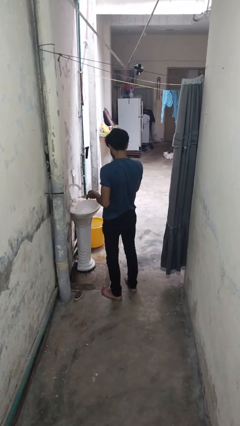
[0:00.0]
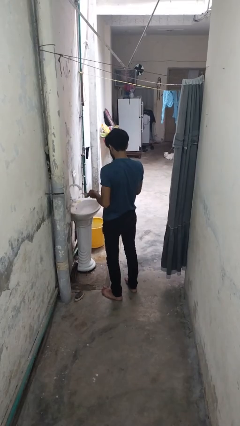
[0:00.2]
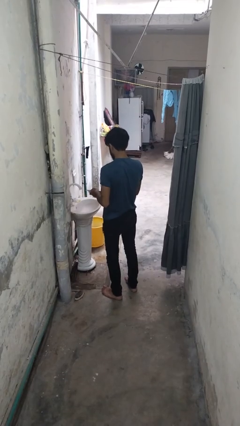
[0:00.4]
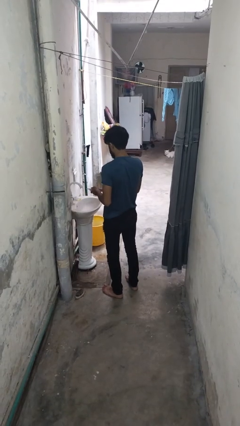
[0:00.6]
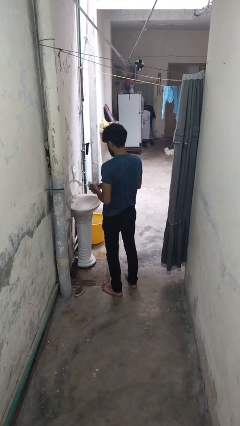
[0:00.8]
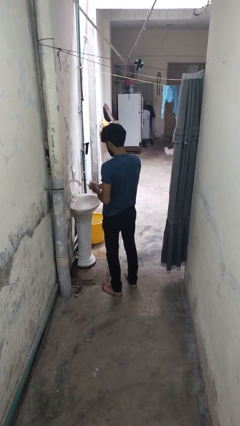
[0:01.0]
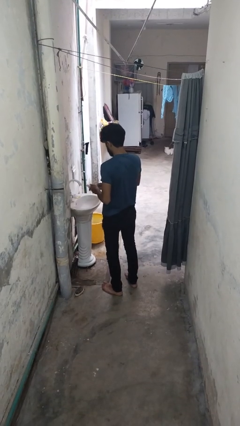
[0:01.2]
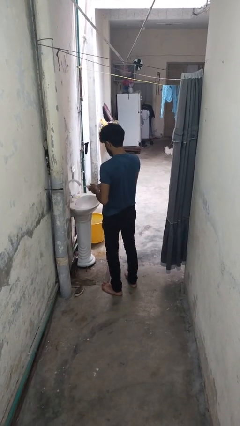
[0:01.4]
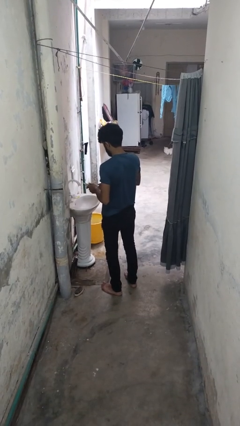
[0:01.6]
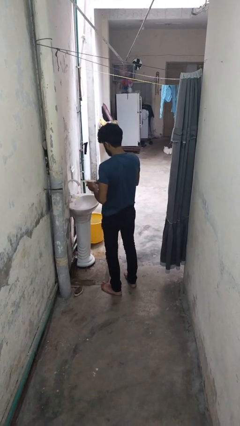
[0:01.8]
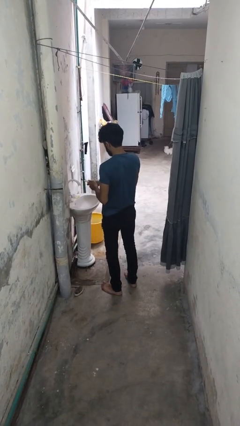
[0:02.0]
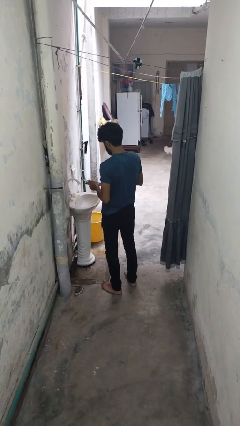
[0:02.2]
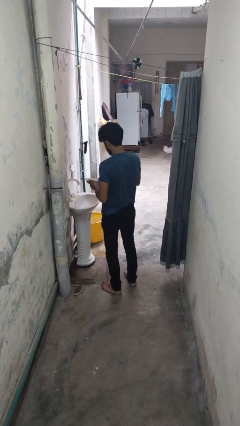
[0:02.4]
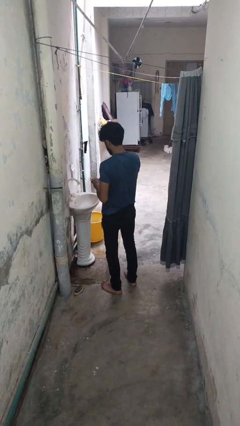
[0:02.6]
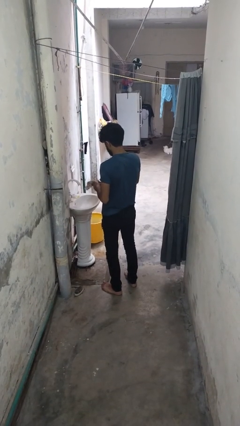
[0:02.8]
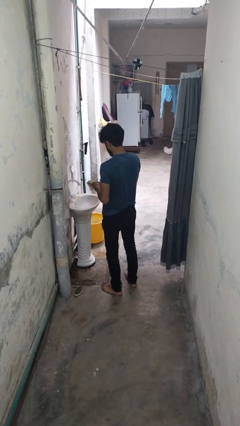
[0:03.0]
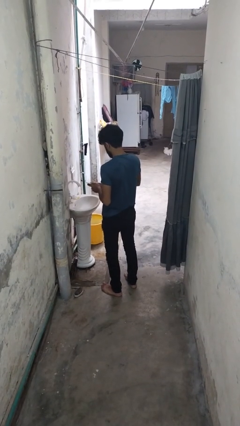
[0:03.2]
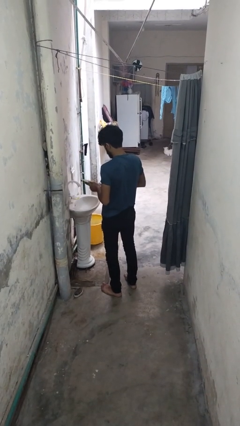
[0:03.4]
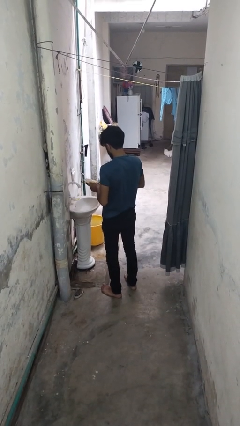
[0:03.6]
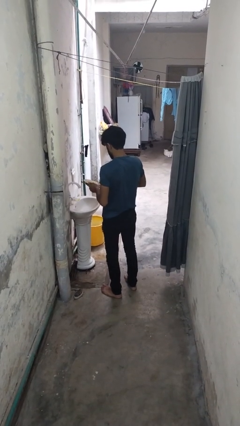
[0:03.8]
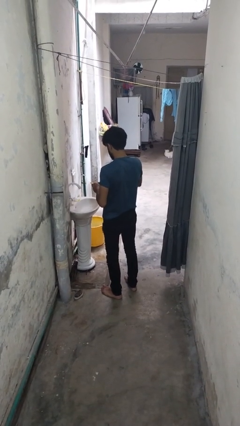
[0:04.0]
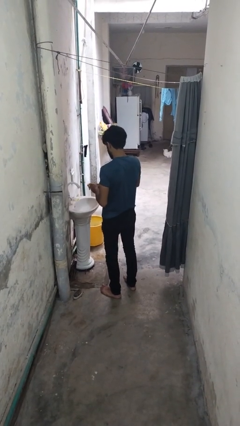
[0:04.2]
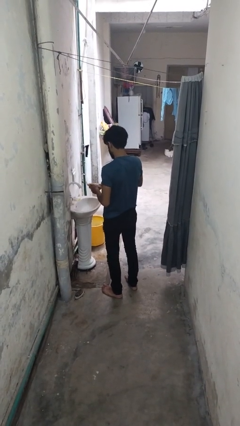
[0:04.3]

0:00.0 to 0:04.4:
person dries dish

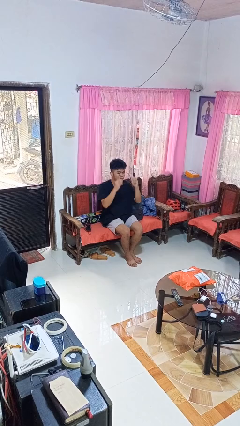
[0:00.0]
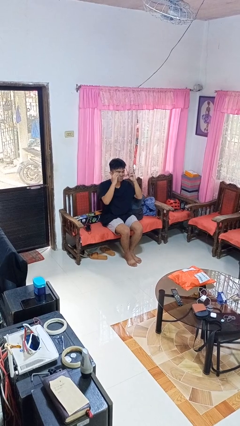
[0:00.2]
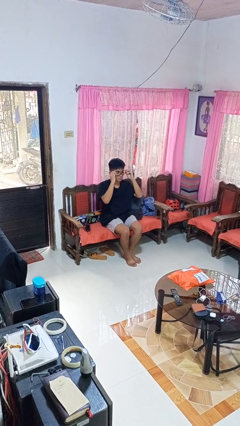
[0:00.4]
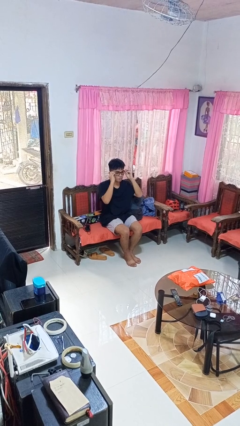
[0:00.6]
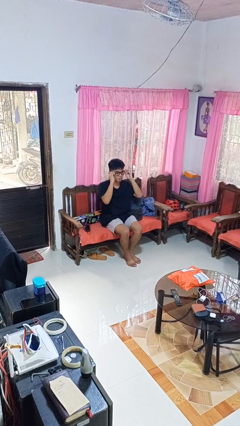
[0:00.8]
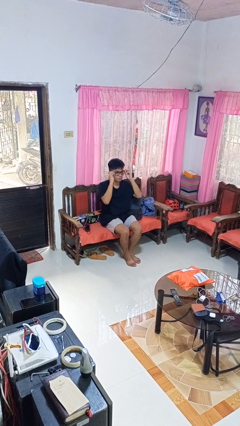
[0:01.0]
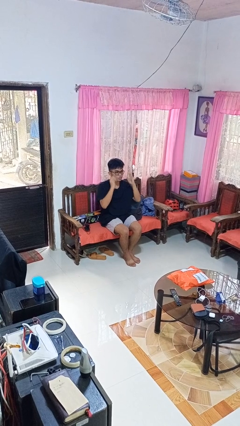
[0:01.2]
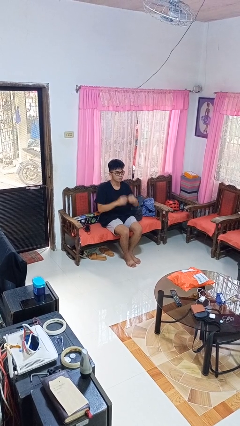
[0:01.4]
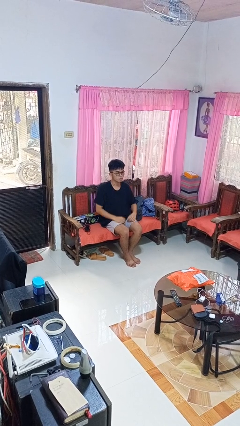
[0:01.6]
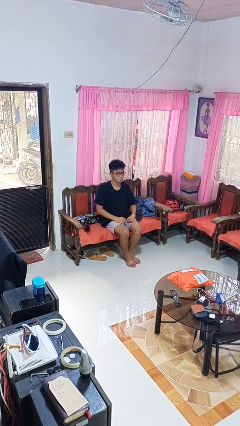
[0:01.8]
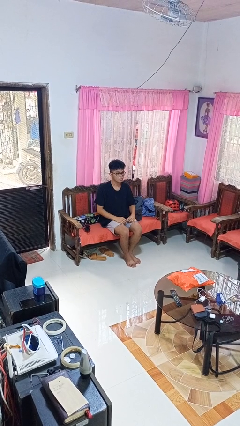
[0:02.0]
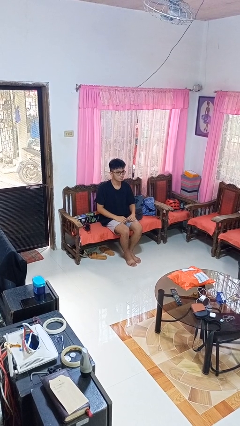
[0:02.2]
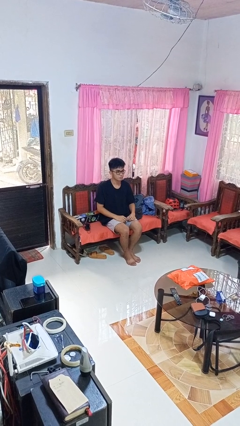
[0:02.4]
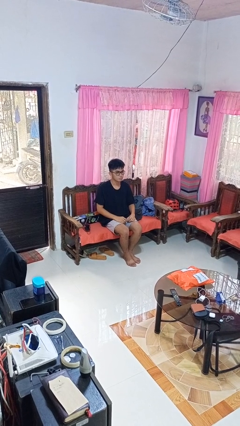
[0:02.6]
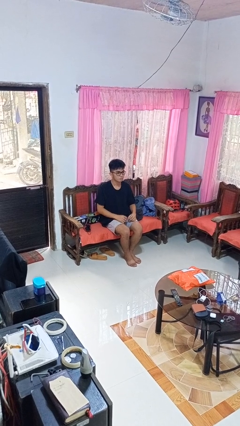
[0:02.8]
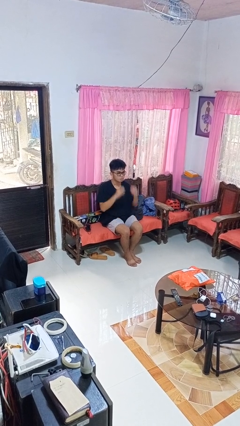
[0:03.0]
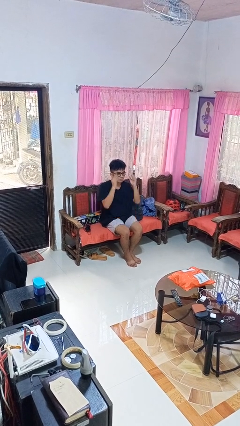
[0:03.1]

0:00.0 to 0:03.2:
person puts on glasses

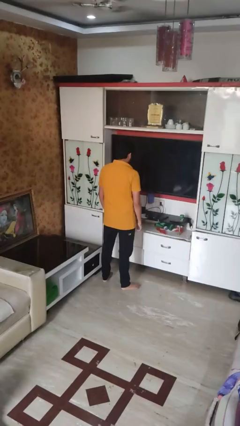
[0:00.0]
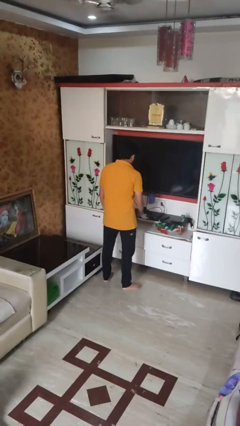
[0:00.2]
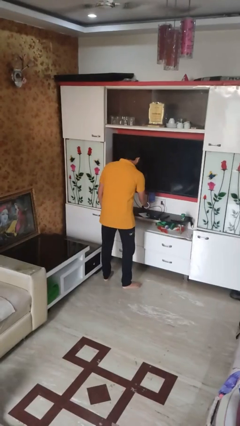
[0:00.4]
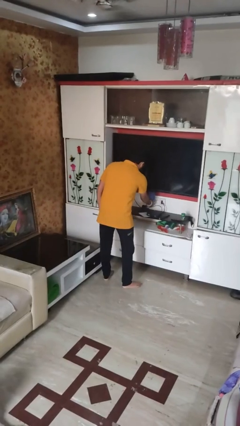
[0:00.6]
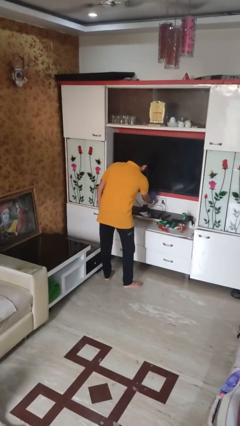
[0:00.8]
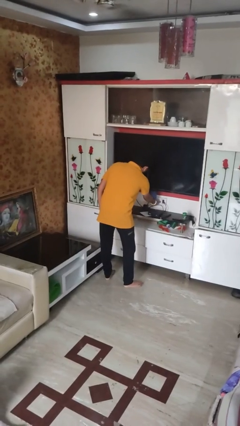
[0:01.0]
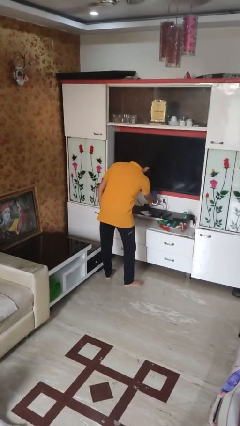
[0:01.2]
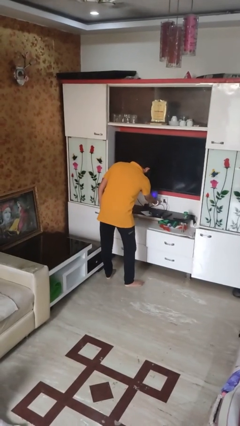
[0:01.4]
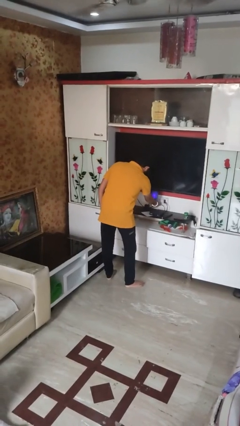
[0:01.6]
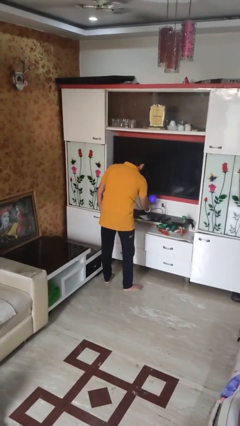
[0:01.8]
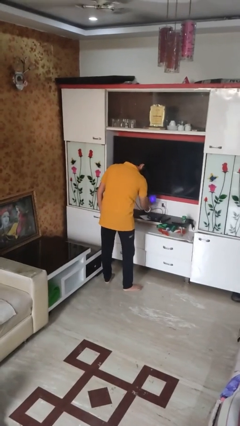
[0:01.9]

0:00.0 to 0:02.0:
person turns on lamp

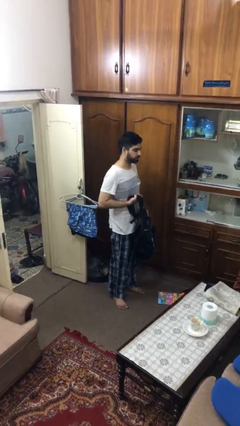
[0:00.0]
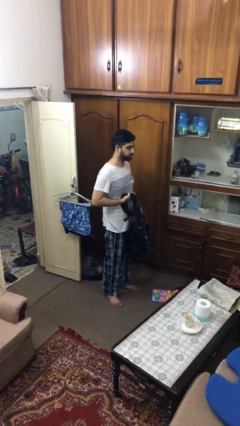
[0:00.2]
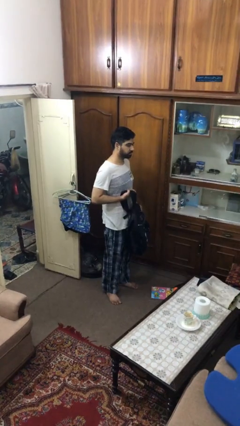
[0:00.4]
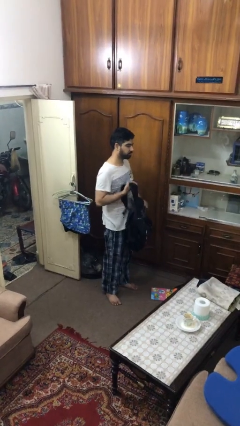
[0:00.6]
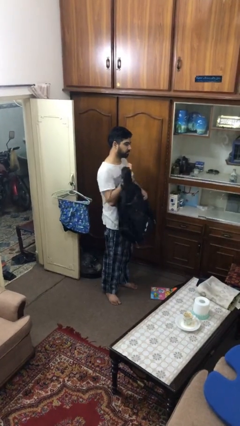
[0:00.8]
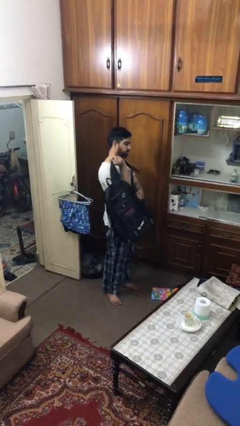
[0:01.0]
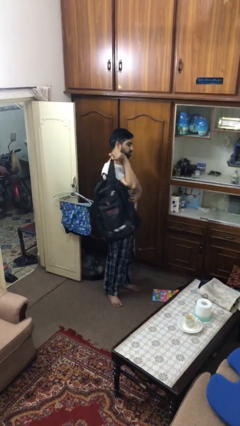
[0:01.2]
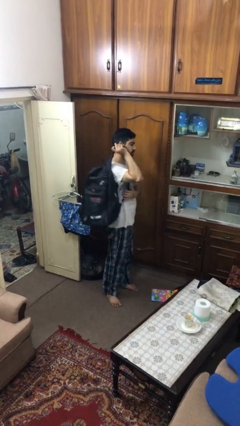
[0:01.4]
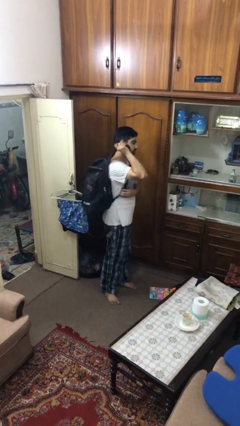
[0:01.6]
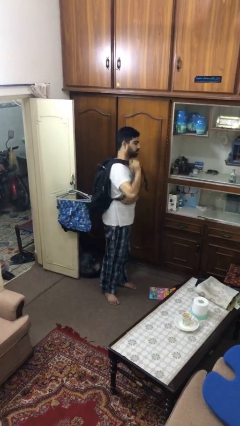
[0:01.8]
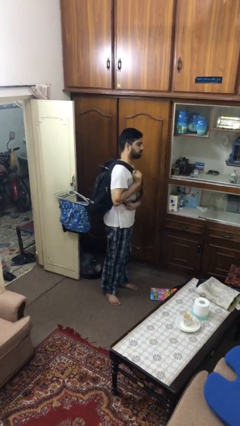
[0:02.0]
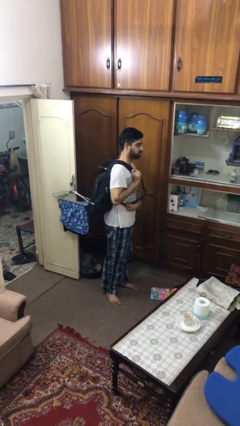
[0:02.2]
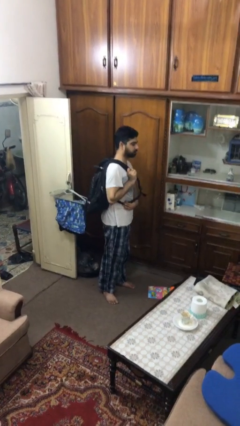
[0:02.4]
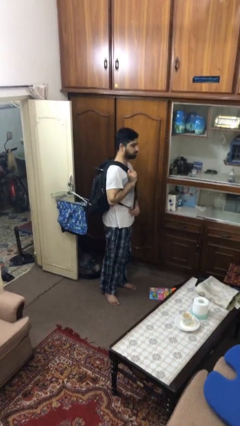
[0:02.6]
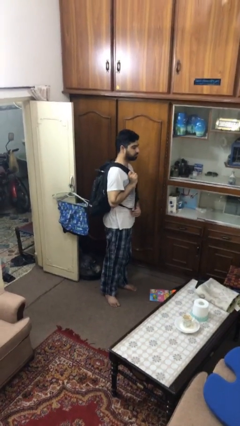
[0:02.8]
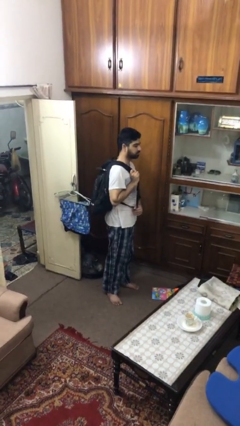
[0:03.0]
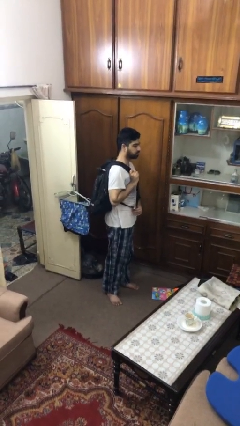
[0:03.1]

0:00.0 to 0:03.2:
person puts on backpack

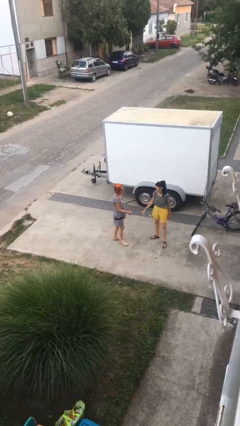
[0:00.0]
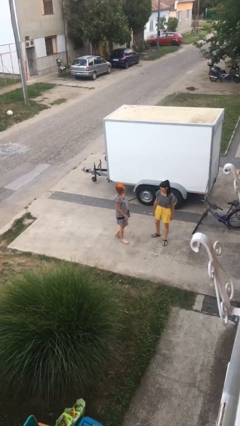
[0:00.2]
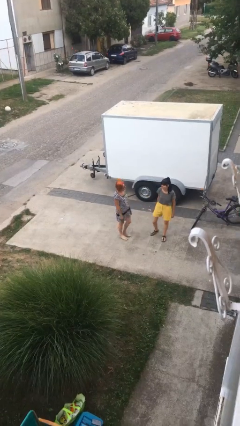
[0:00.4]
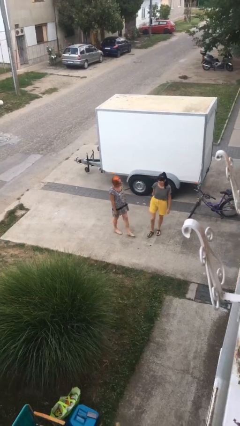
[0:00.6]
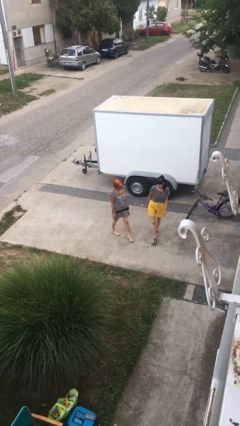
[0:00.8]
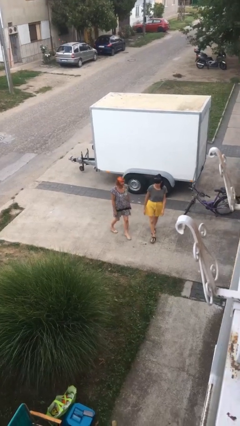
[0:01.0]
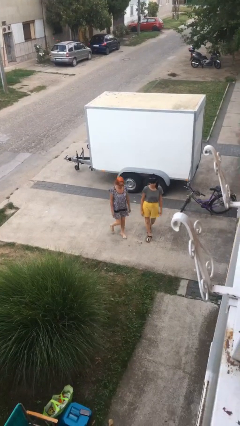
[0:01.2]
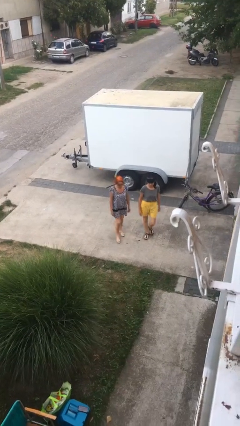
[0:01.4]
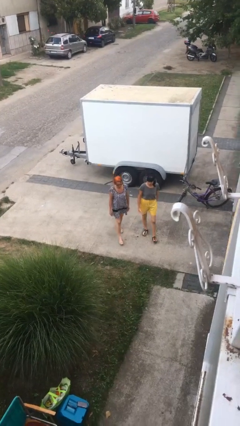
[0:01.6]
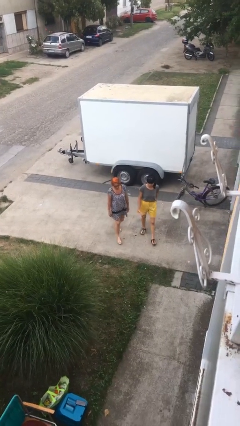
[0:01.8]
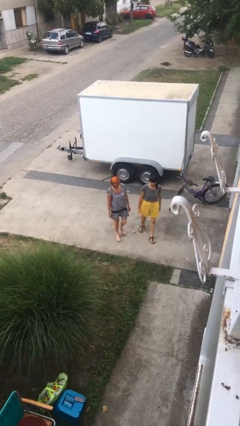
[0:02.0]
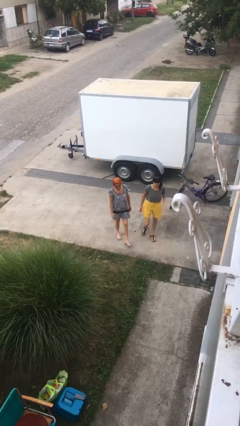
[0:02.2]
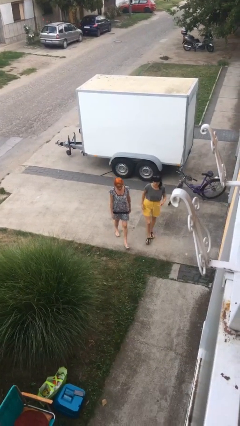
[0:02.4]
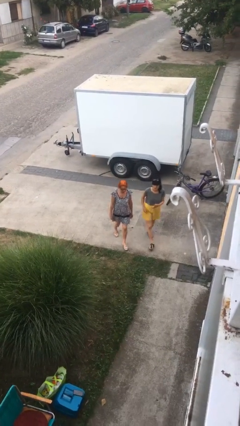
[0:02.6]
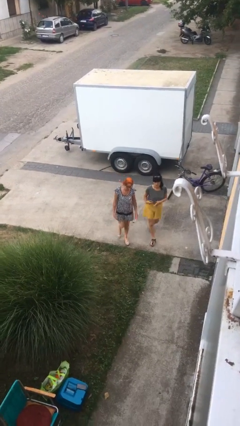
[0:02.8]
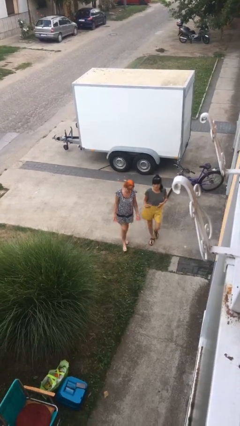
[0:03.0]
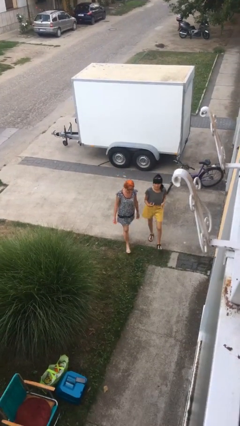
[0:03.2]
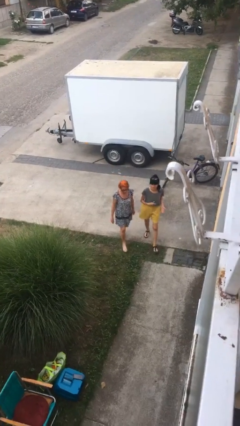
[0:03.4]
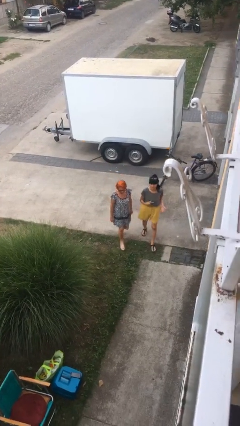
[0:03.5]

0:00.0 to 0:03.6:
person talks to person

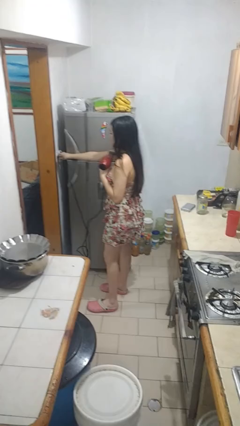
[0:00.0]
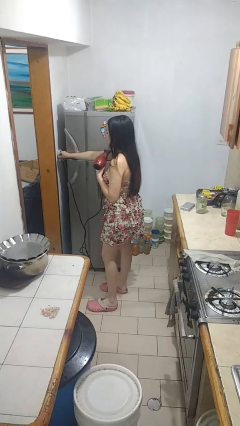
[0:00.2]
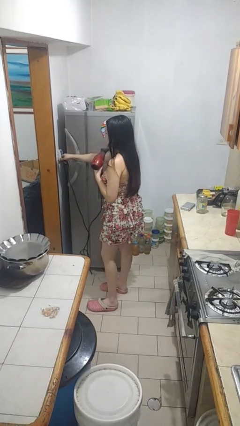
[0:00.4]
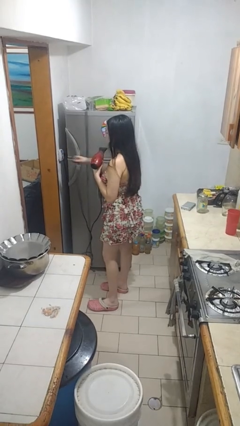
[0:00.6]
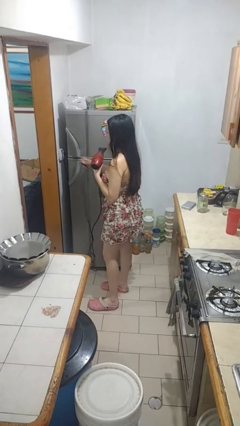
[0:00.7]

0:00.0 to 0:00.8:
person unplugs from electrical socket

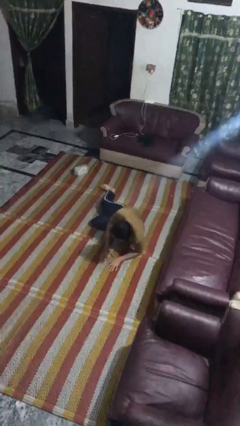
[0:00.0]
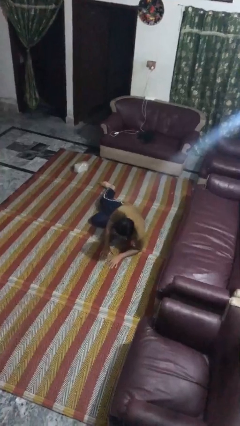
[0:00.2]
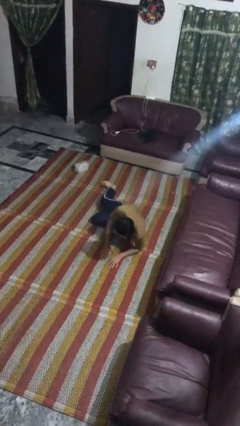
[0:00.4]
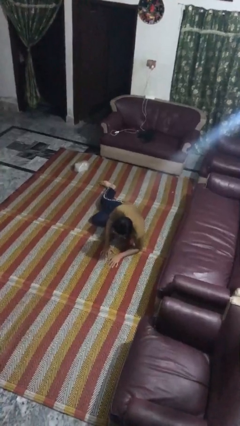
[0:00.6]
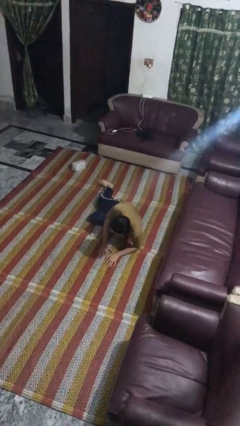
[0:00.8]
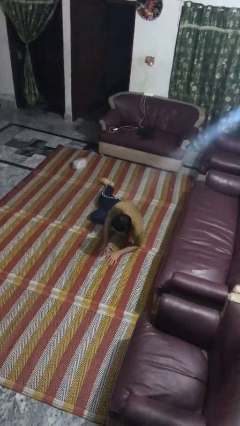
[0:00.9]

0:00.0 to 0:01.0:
person lies down on floor
